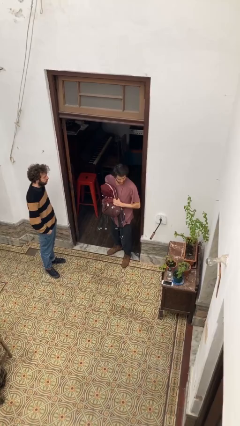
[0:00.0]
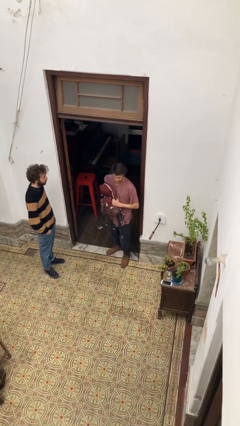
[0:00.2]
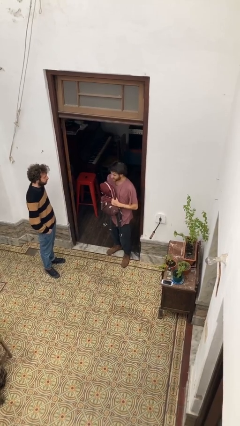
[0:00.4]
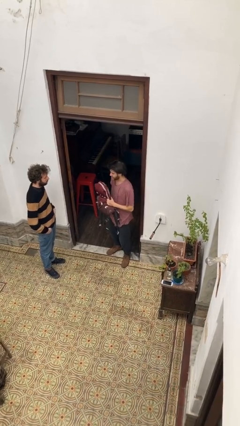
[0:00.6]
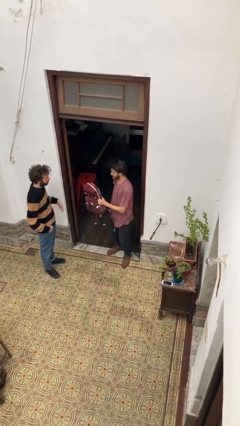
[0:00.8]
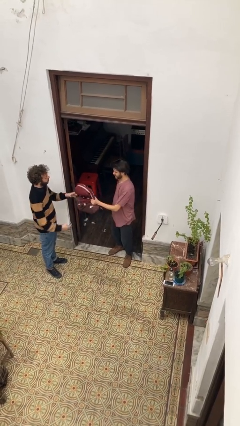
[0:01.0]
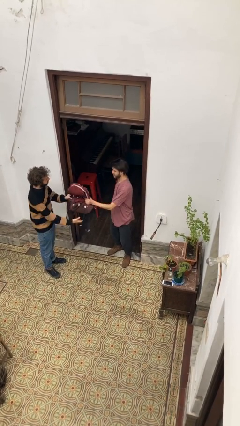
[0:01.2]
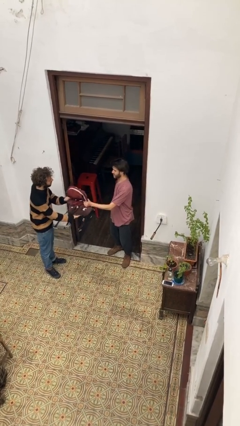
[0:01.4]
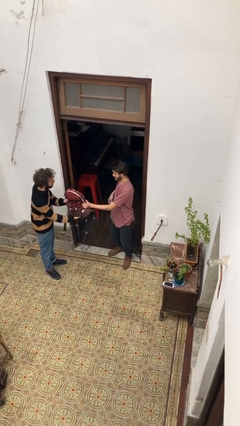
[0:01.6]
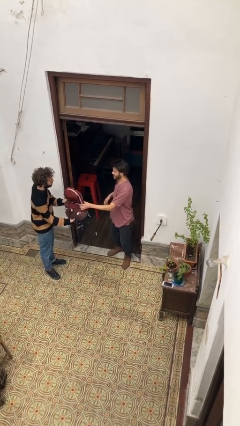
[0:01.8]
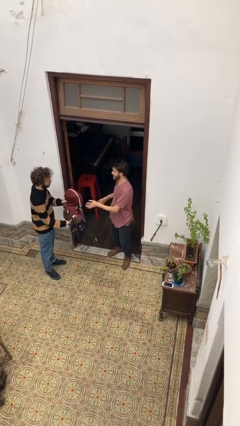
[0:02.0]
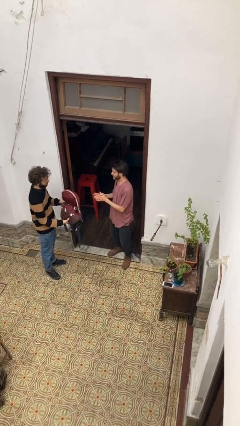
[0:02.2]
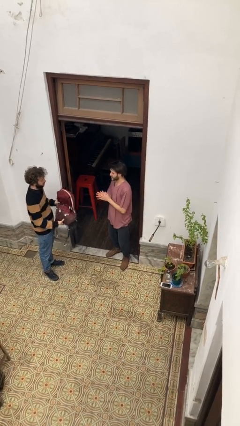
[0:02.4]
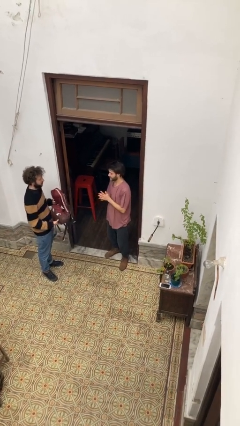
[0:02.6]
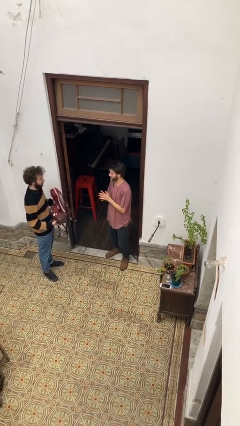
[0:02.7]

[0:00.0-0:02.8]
person transfers object to person

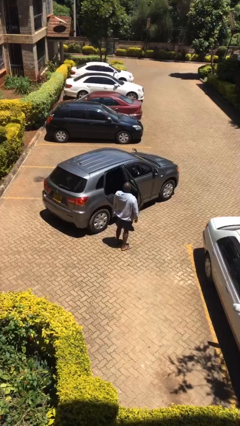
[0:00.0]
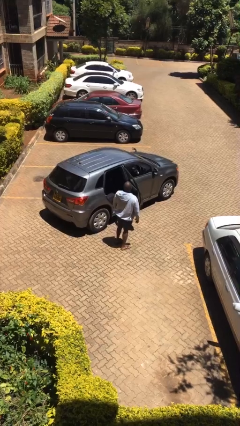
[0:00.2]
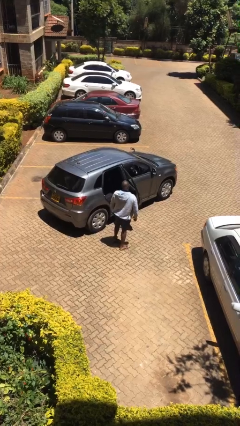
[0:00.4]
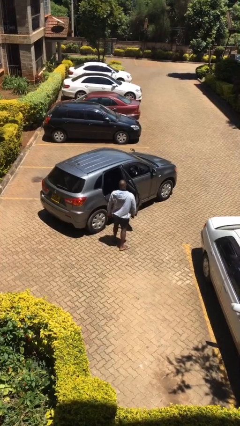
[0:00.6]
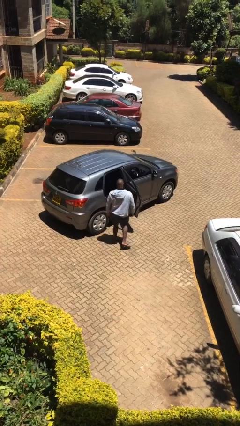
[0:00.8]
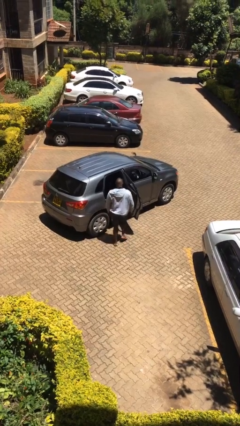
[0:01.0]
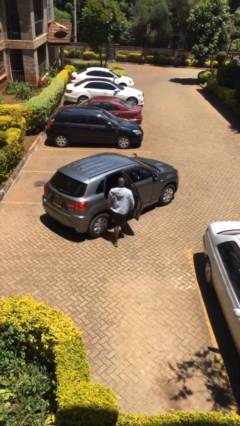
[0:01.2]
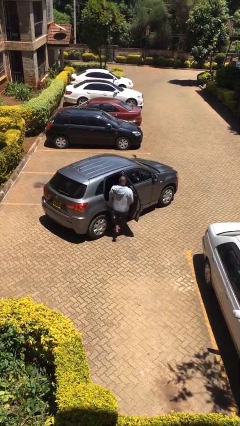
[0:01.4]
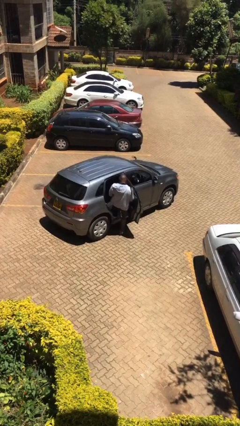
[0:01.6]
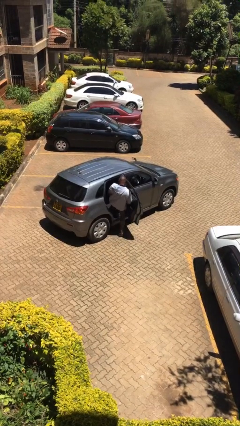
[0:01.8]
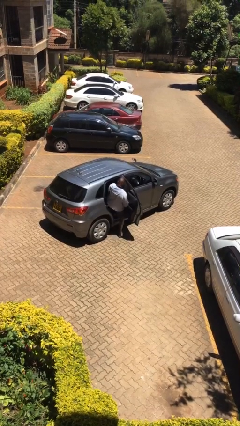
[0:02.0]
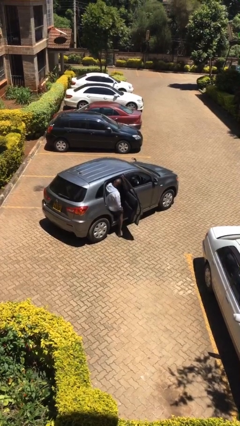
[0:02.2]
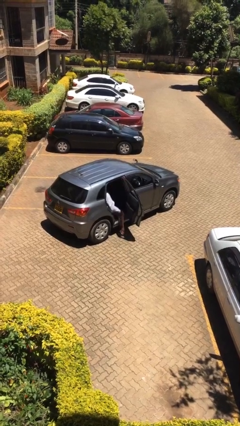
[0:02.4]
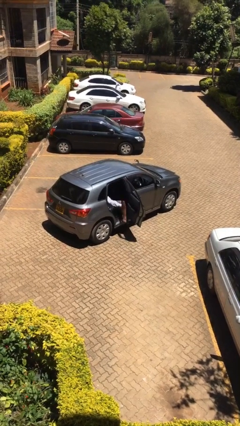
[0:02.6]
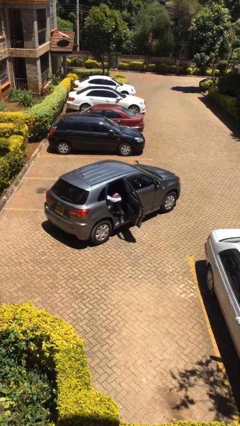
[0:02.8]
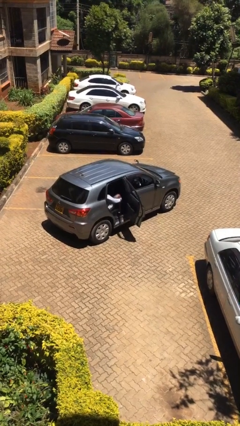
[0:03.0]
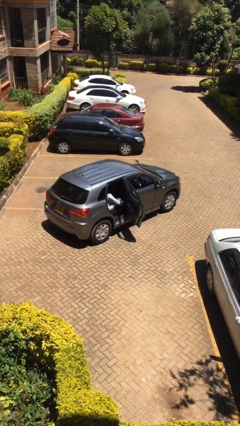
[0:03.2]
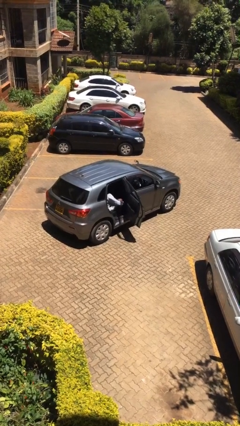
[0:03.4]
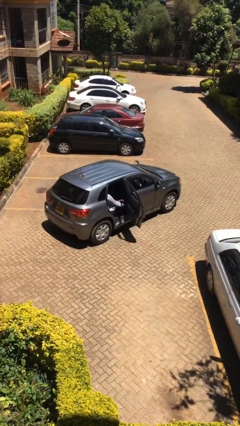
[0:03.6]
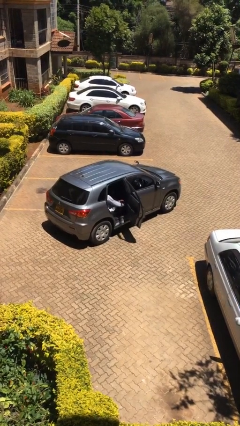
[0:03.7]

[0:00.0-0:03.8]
person enters car

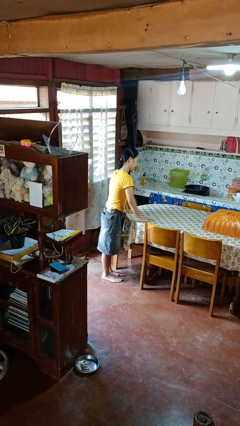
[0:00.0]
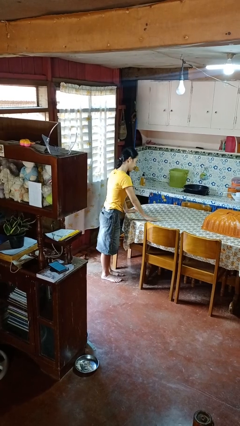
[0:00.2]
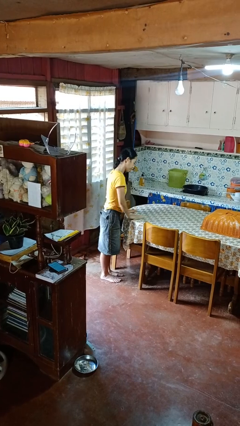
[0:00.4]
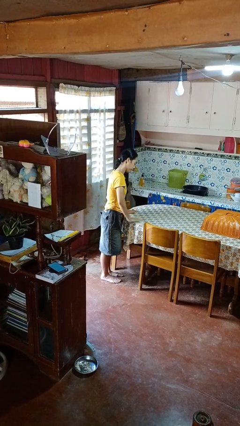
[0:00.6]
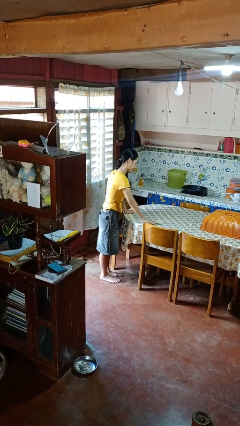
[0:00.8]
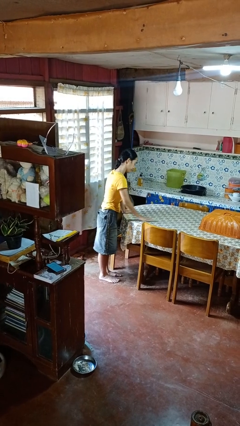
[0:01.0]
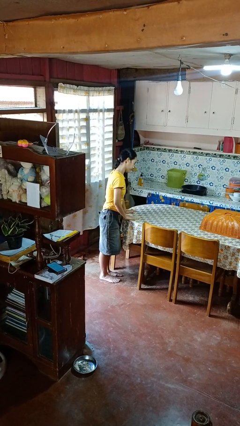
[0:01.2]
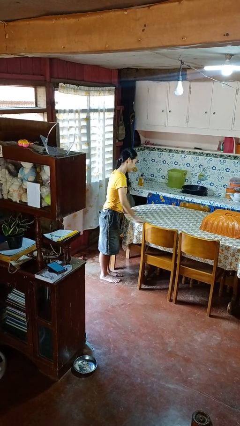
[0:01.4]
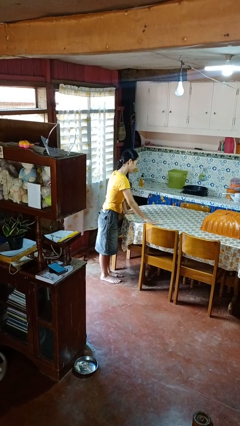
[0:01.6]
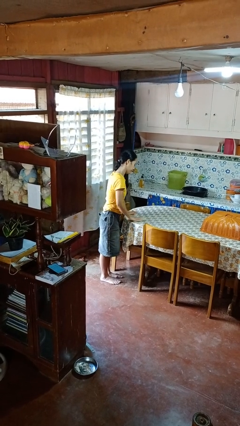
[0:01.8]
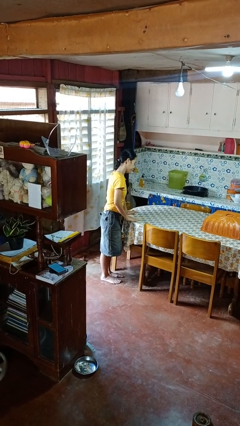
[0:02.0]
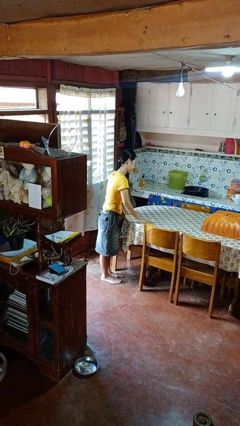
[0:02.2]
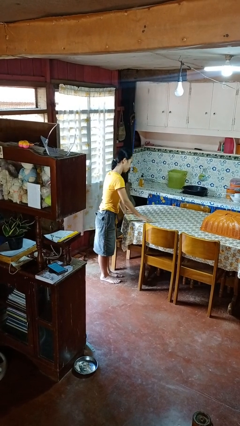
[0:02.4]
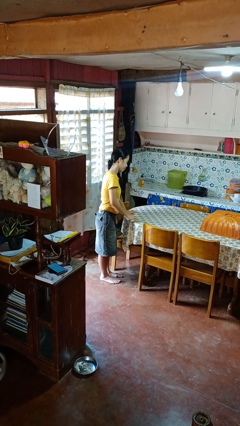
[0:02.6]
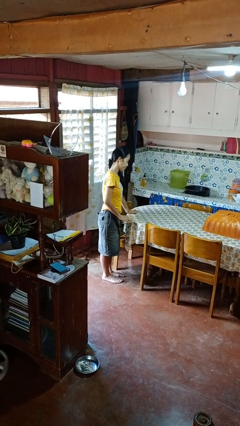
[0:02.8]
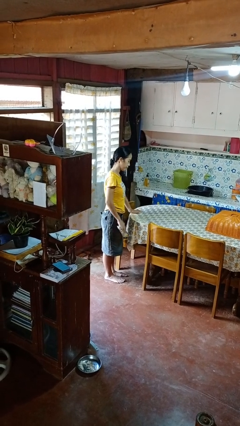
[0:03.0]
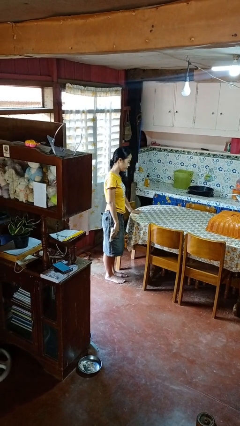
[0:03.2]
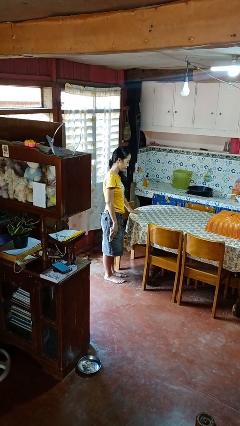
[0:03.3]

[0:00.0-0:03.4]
person cleans table with rag

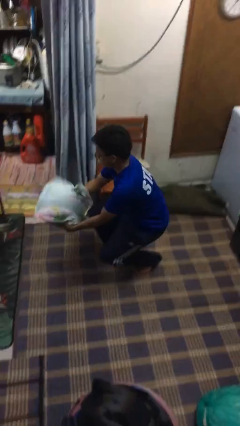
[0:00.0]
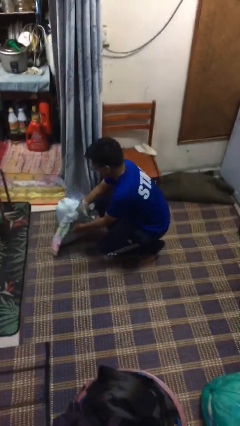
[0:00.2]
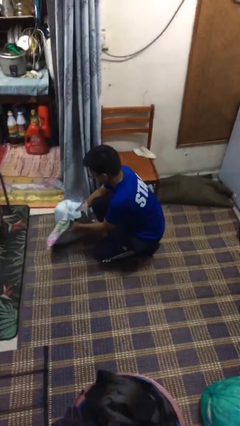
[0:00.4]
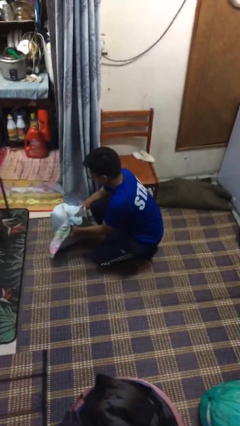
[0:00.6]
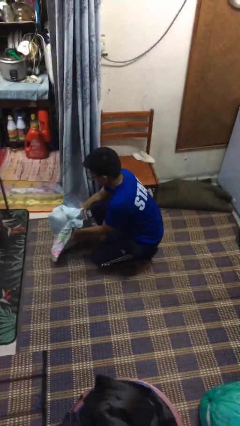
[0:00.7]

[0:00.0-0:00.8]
person catches dropped object

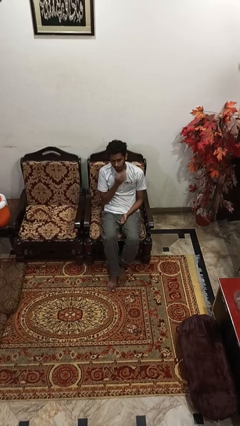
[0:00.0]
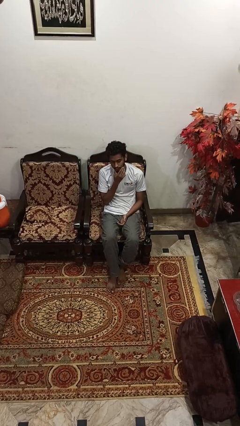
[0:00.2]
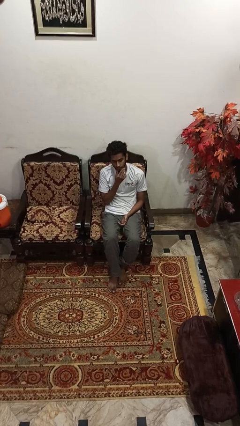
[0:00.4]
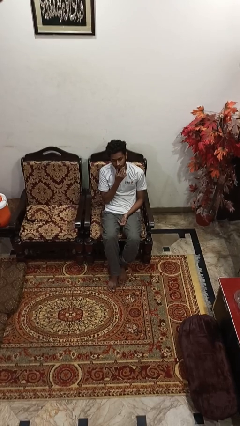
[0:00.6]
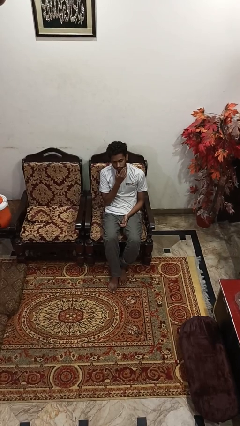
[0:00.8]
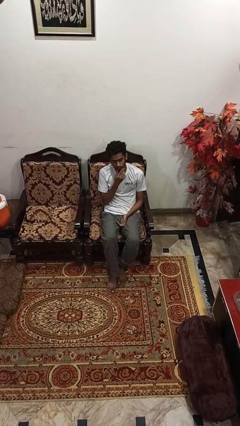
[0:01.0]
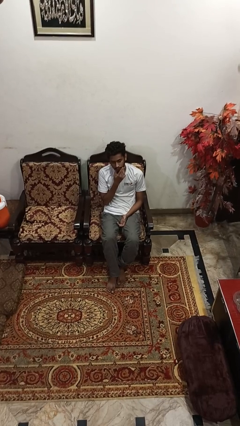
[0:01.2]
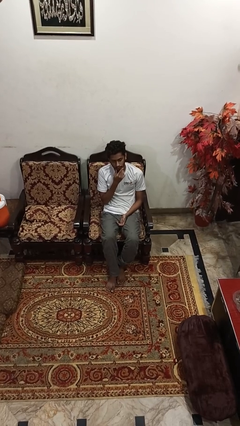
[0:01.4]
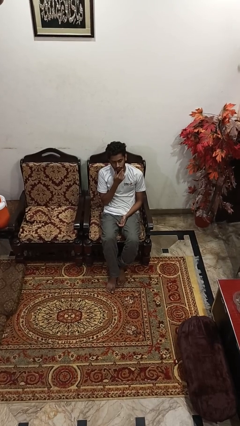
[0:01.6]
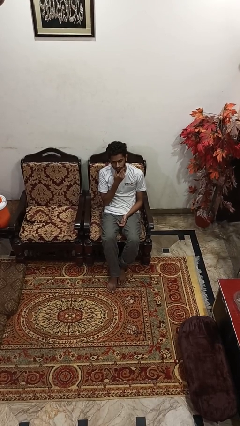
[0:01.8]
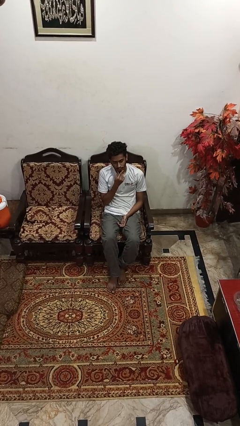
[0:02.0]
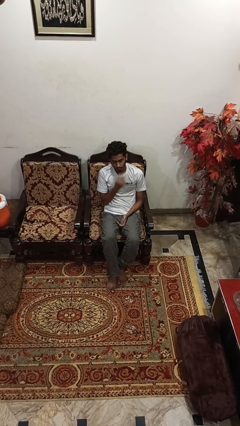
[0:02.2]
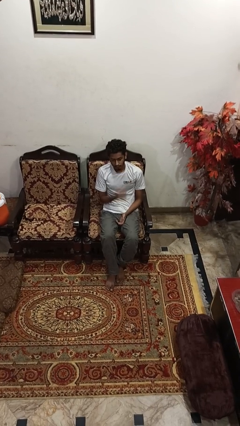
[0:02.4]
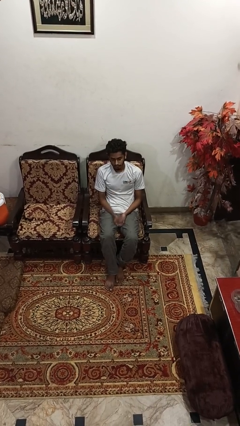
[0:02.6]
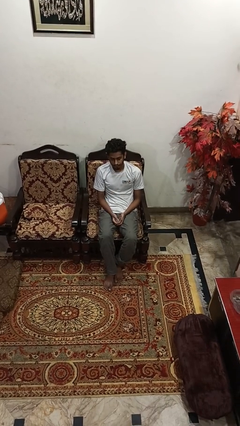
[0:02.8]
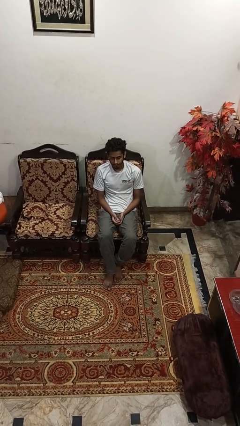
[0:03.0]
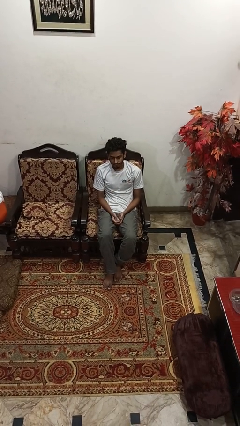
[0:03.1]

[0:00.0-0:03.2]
person strokes chin

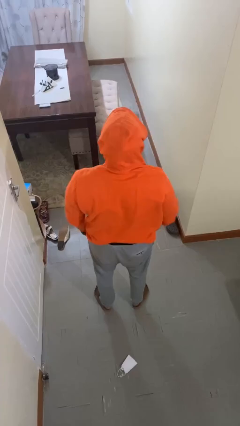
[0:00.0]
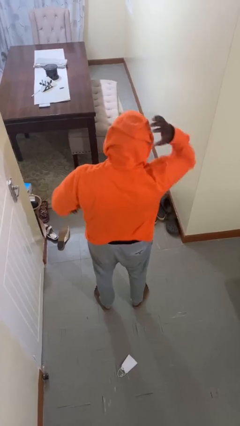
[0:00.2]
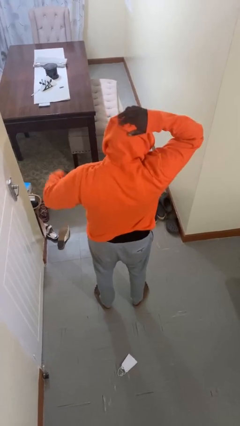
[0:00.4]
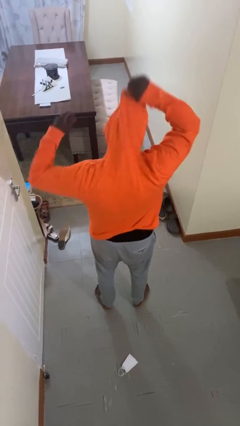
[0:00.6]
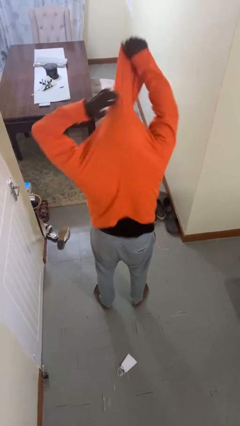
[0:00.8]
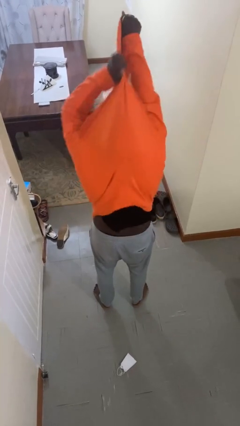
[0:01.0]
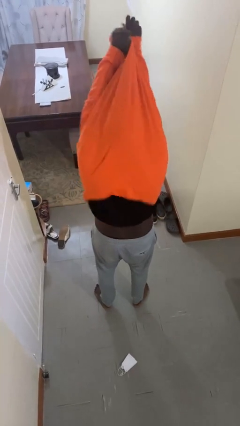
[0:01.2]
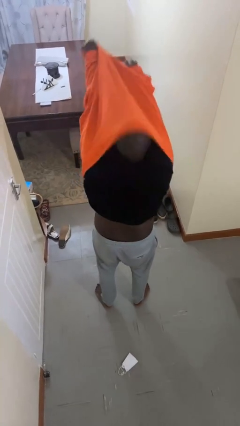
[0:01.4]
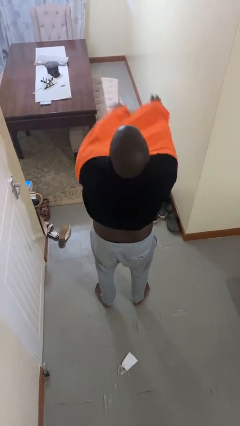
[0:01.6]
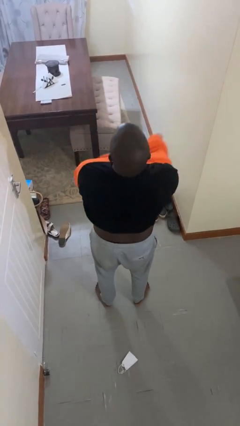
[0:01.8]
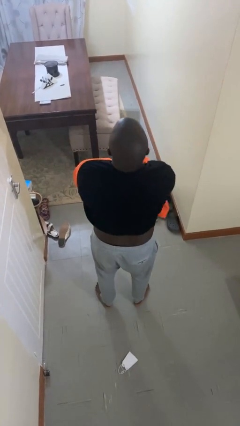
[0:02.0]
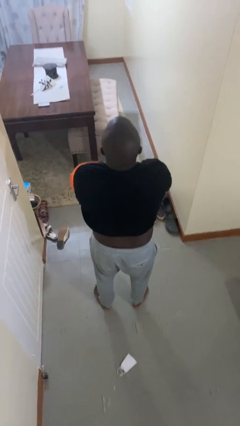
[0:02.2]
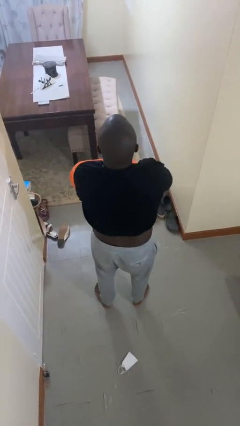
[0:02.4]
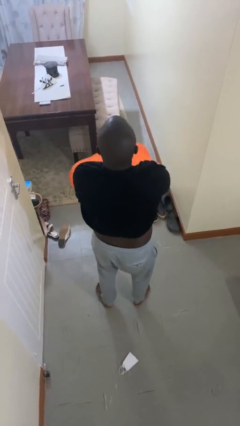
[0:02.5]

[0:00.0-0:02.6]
person takes off hoodie

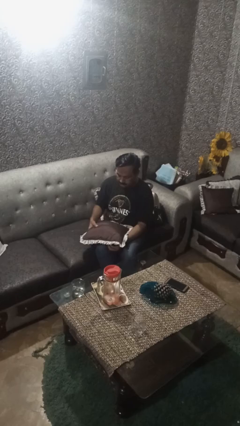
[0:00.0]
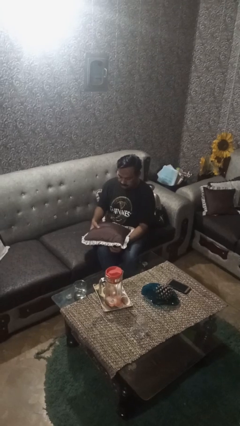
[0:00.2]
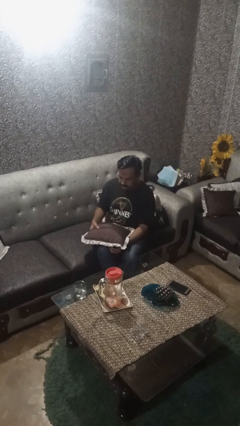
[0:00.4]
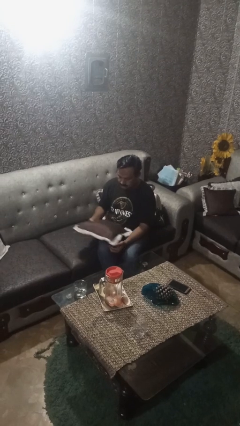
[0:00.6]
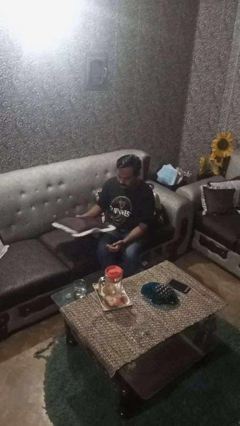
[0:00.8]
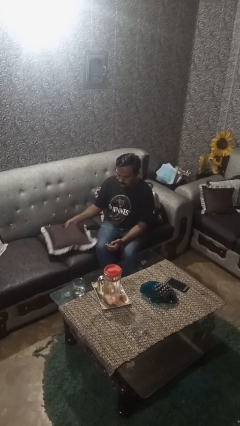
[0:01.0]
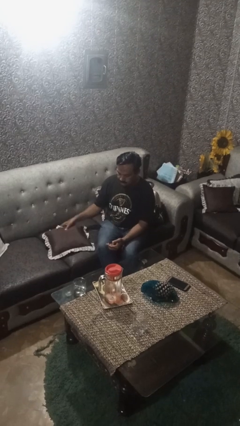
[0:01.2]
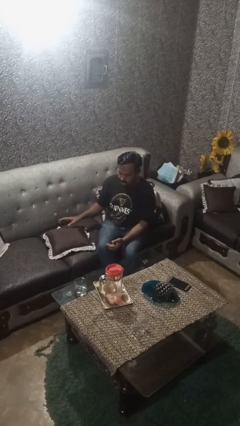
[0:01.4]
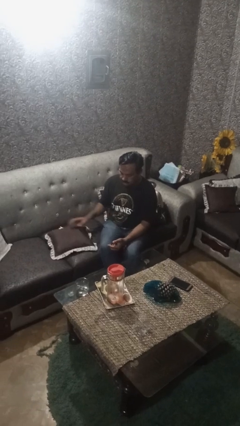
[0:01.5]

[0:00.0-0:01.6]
person puts down object on couch
